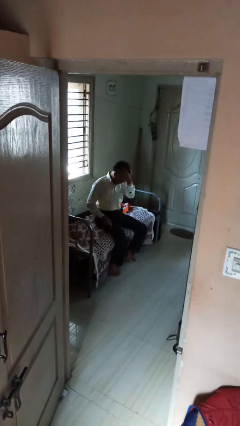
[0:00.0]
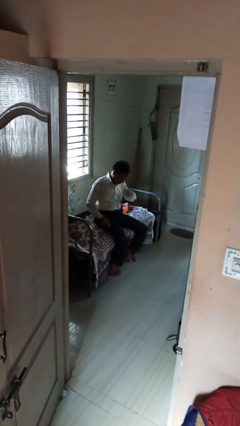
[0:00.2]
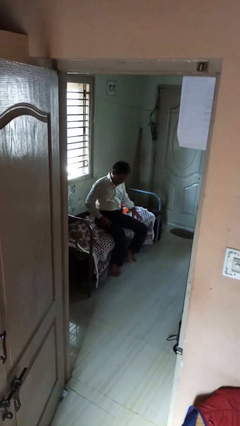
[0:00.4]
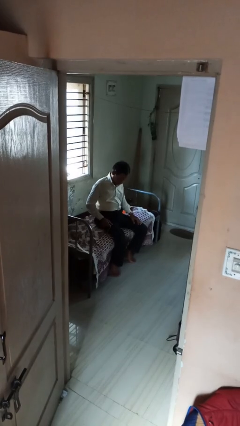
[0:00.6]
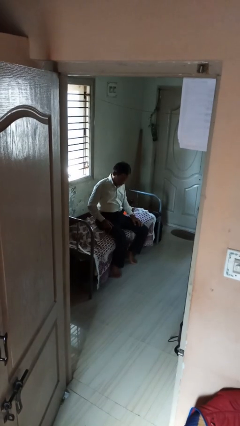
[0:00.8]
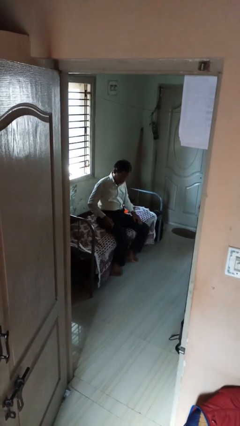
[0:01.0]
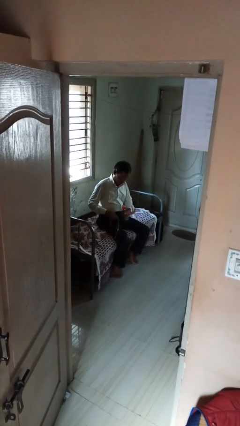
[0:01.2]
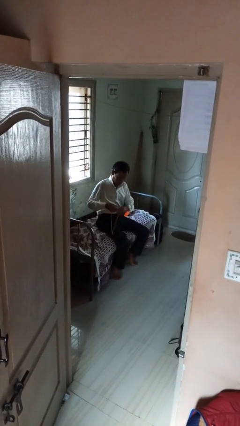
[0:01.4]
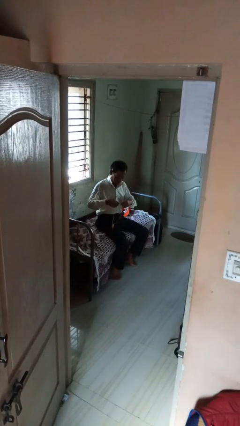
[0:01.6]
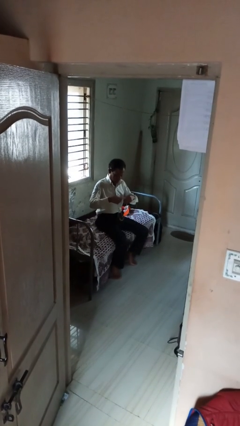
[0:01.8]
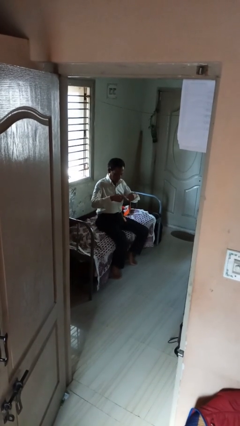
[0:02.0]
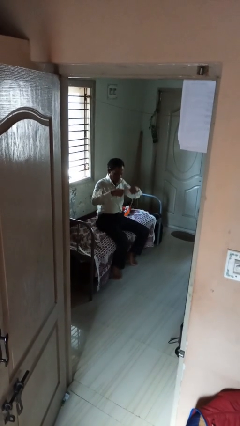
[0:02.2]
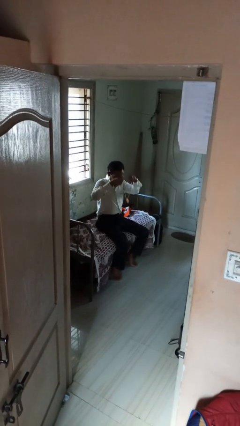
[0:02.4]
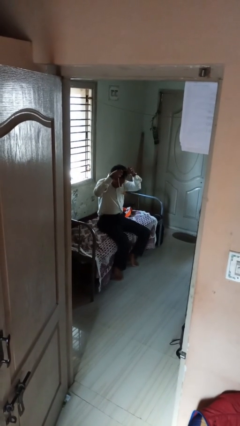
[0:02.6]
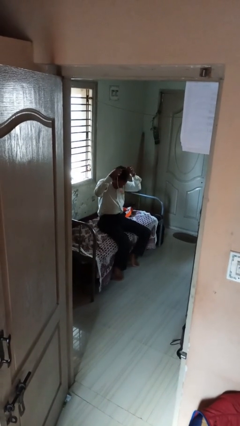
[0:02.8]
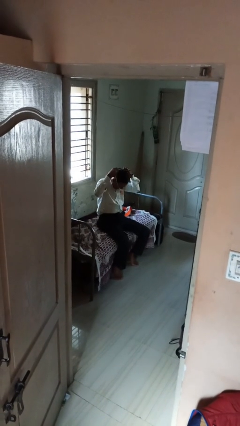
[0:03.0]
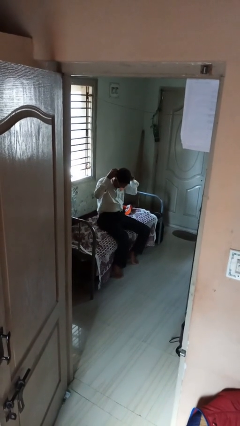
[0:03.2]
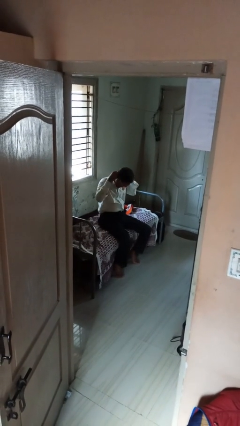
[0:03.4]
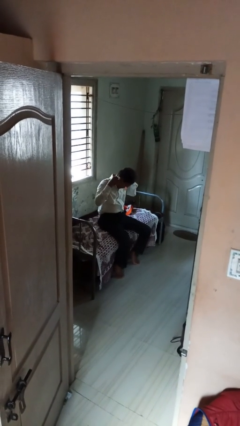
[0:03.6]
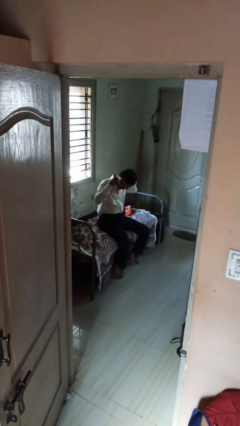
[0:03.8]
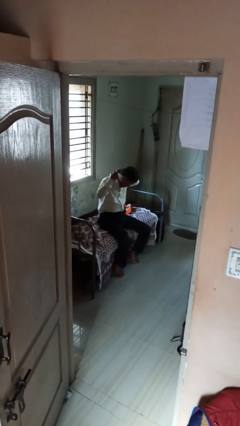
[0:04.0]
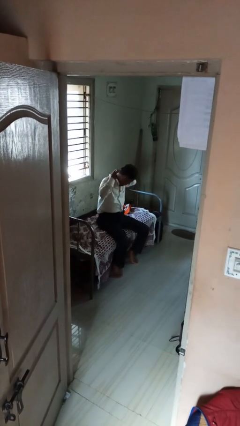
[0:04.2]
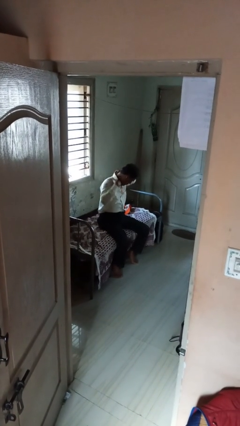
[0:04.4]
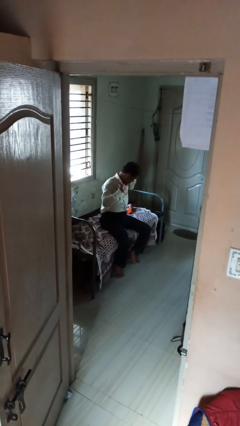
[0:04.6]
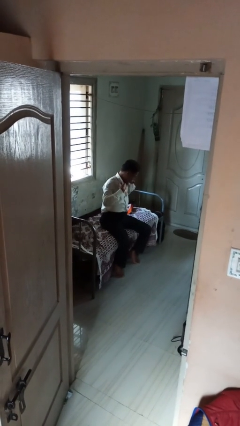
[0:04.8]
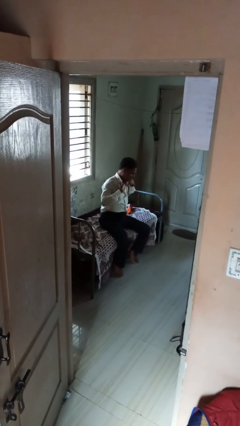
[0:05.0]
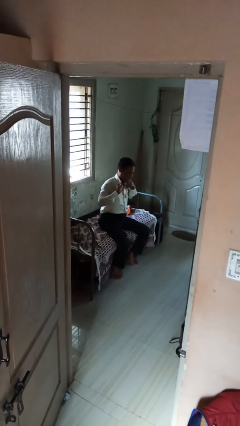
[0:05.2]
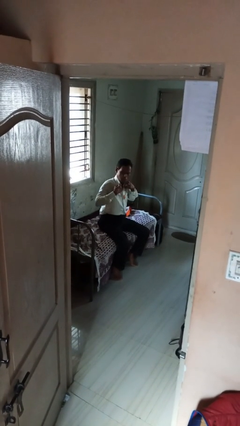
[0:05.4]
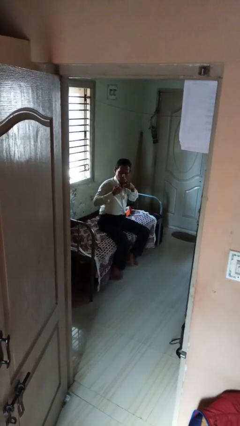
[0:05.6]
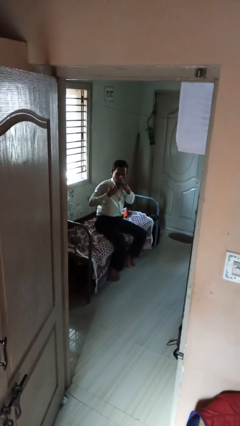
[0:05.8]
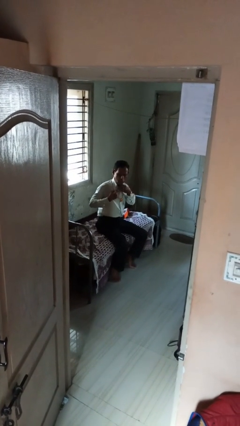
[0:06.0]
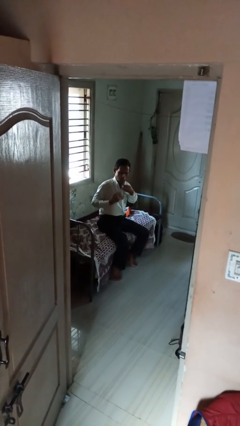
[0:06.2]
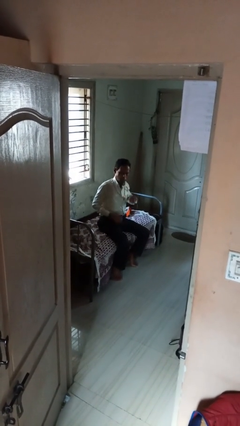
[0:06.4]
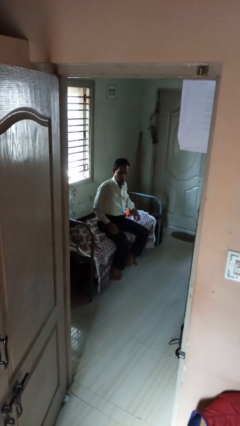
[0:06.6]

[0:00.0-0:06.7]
person puts on necklace

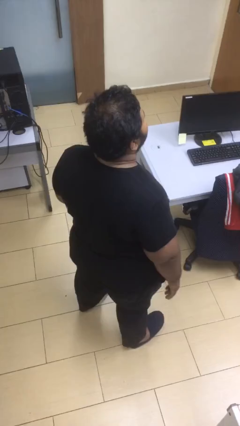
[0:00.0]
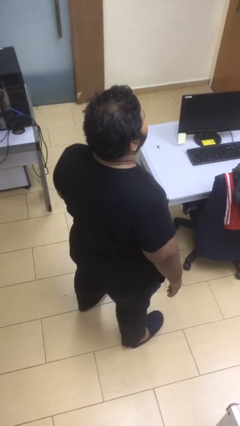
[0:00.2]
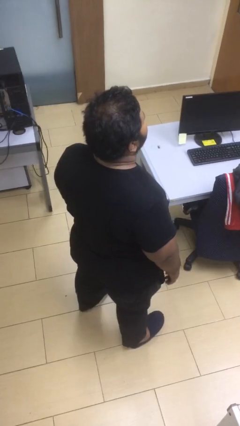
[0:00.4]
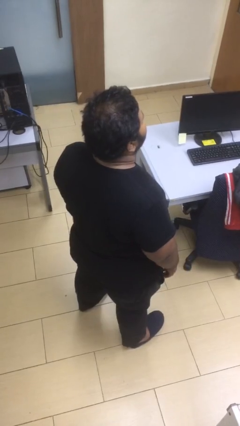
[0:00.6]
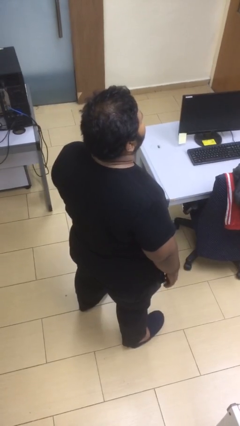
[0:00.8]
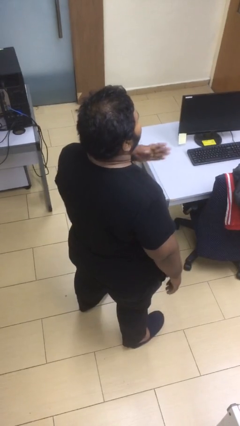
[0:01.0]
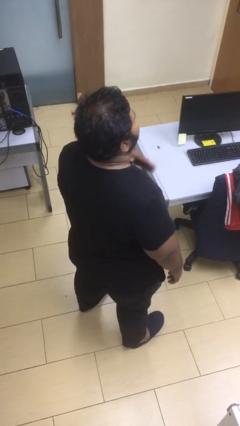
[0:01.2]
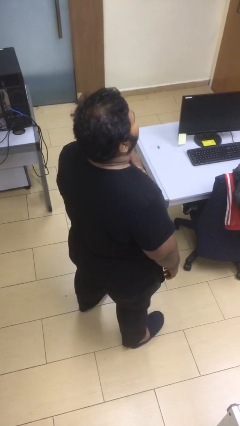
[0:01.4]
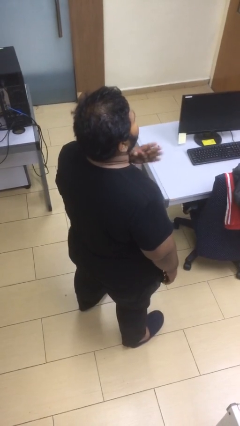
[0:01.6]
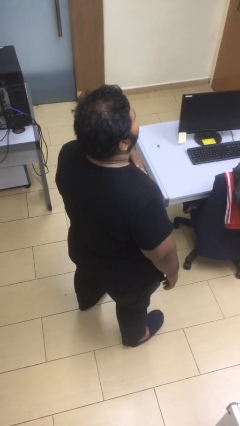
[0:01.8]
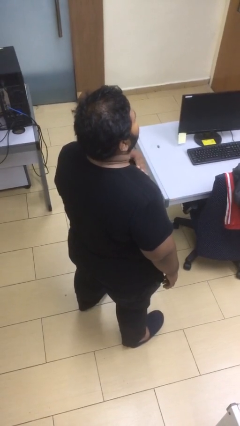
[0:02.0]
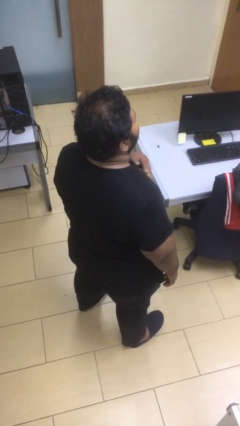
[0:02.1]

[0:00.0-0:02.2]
person drums on chest

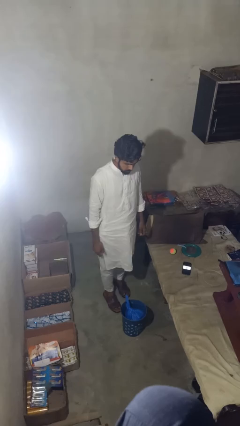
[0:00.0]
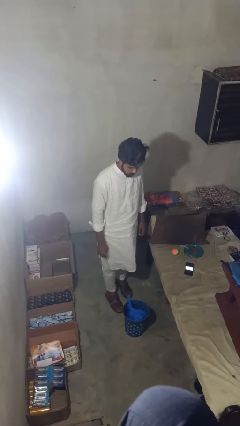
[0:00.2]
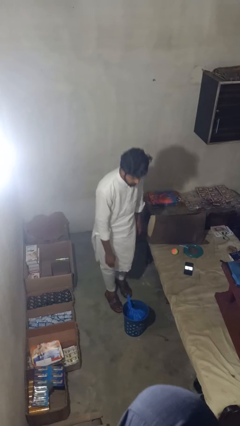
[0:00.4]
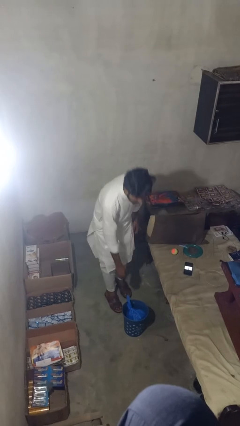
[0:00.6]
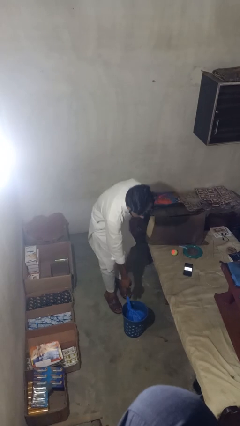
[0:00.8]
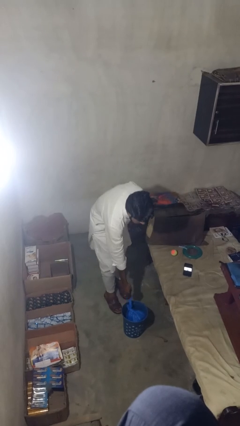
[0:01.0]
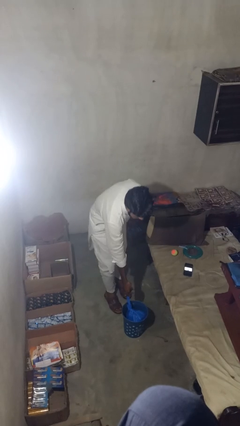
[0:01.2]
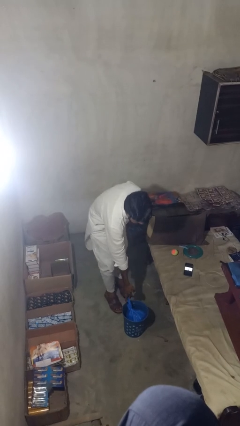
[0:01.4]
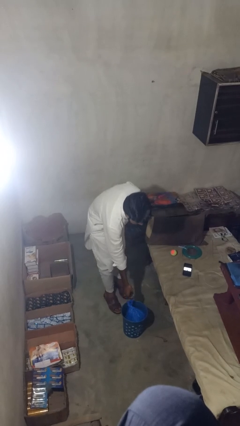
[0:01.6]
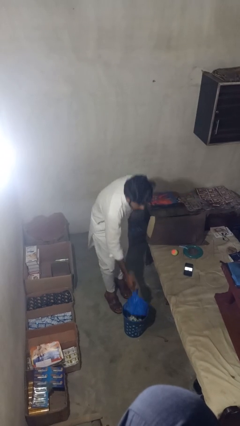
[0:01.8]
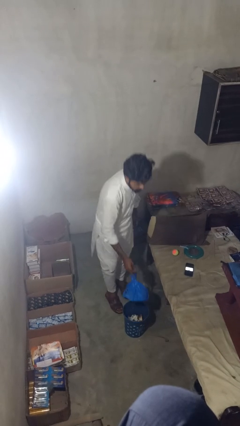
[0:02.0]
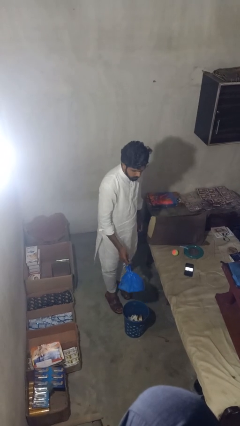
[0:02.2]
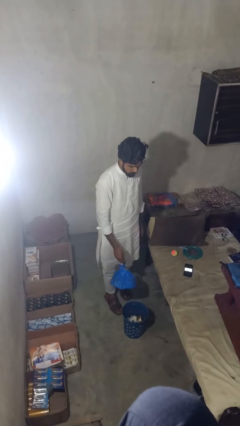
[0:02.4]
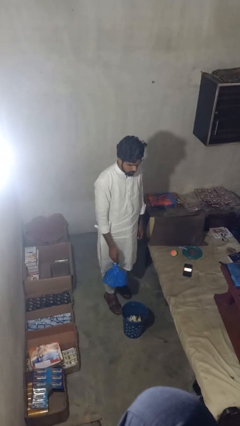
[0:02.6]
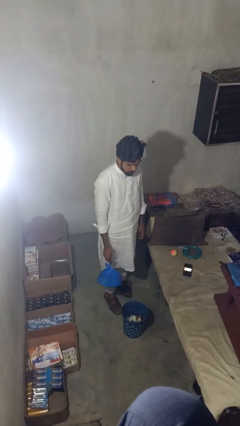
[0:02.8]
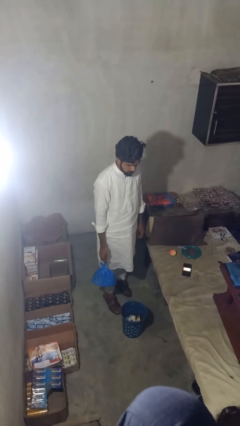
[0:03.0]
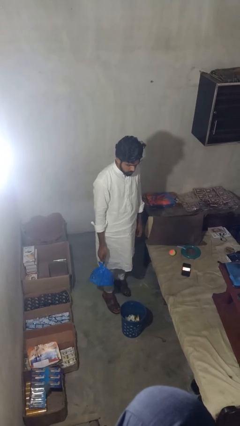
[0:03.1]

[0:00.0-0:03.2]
person takes object from basket

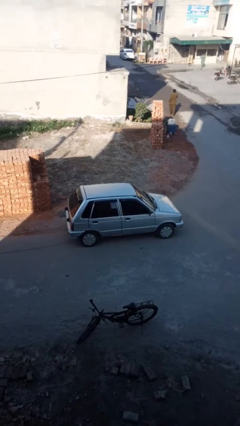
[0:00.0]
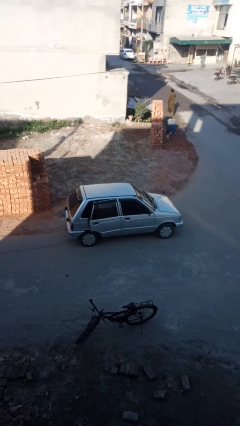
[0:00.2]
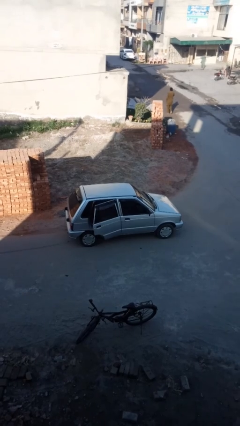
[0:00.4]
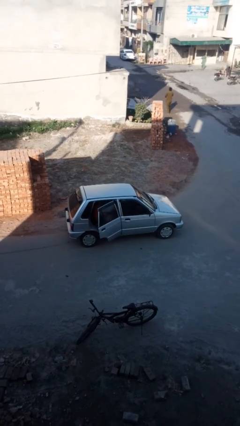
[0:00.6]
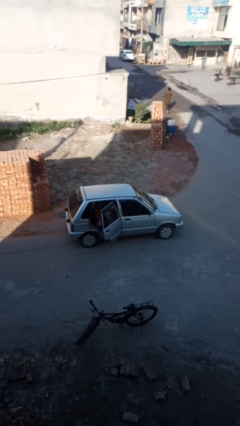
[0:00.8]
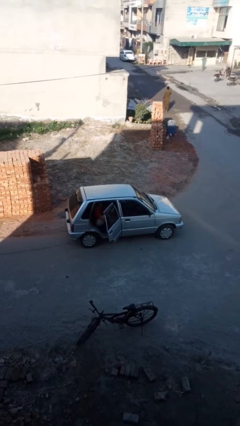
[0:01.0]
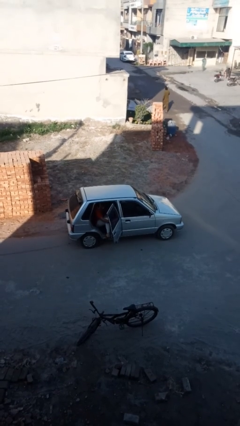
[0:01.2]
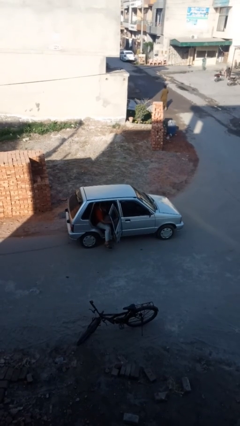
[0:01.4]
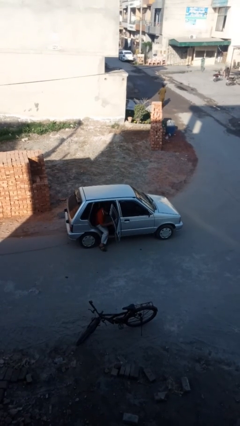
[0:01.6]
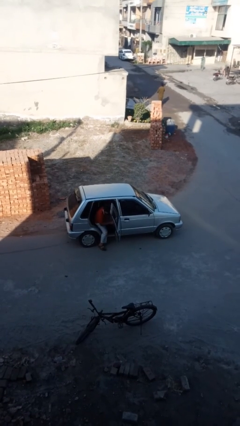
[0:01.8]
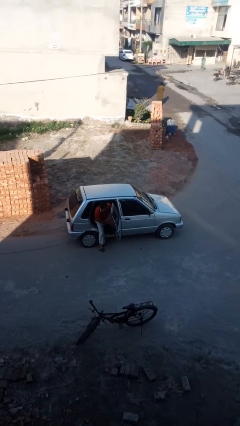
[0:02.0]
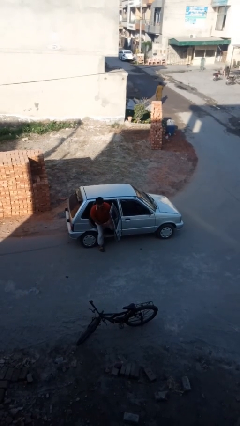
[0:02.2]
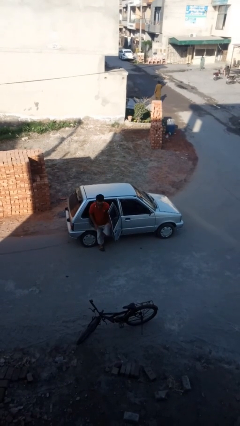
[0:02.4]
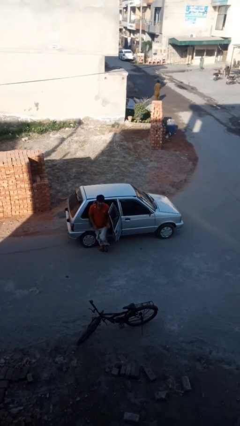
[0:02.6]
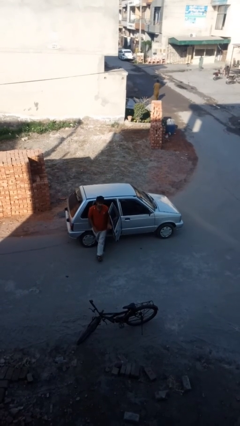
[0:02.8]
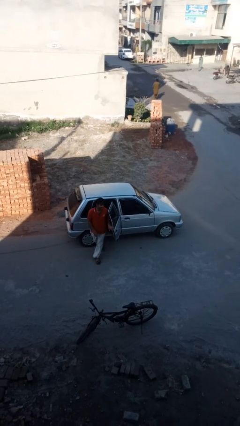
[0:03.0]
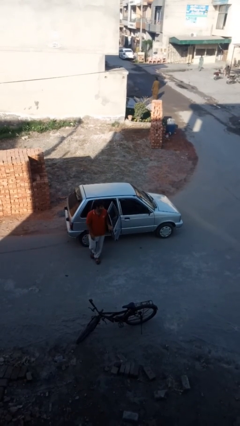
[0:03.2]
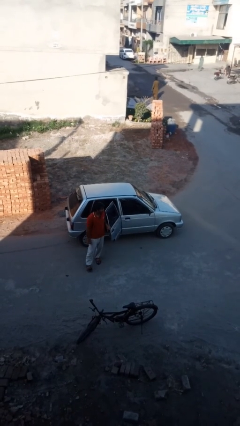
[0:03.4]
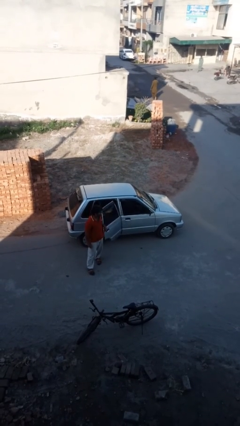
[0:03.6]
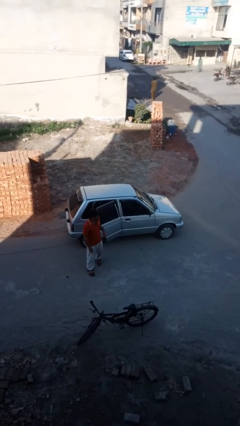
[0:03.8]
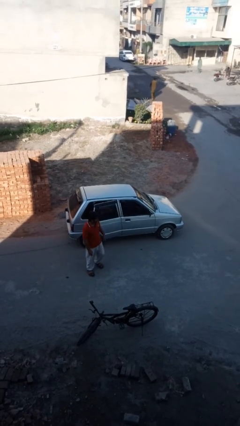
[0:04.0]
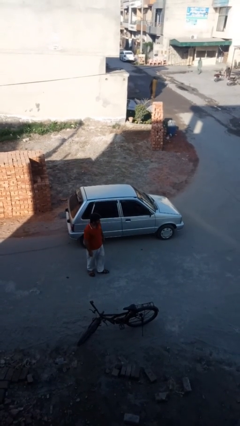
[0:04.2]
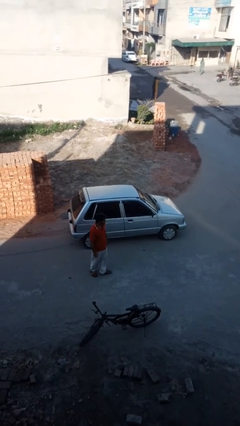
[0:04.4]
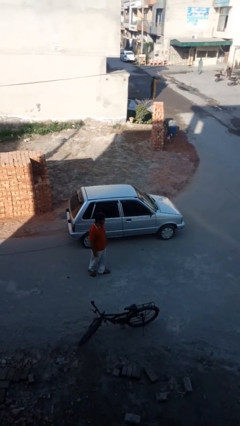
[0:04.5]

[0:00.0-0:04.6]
car drops off person

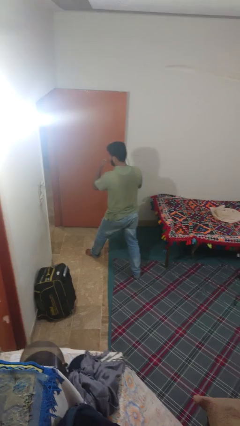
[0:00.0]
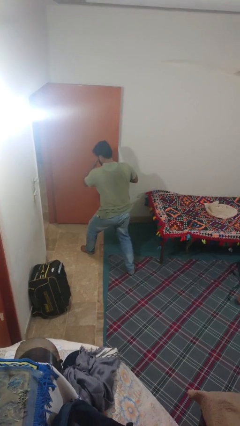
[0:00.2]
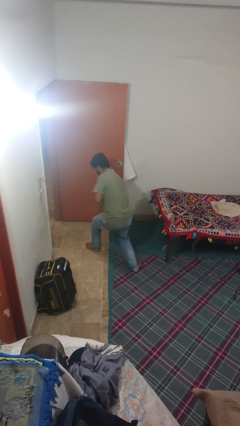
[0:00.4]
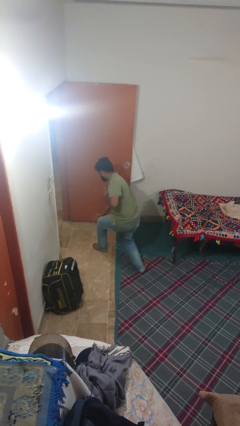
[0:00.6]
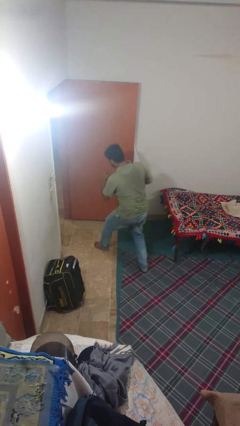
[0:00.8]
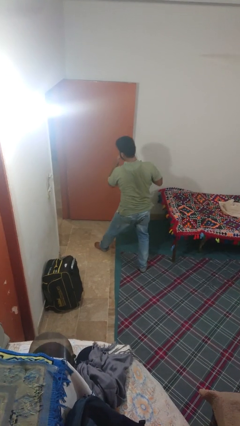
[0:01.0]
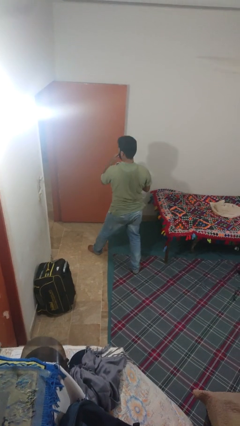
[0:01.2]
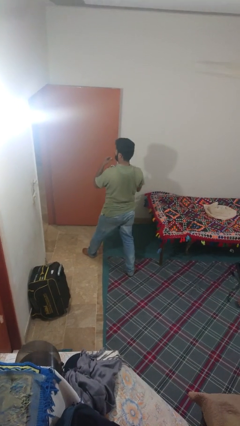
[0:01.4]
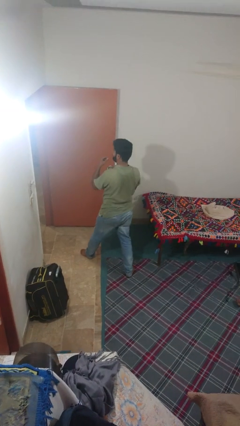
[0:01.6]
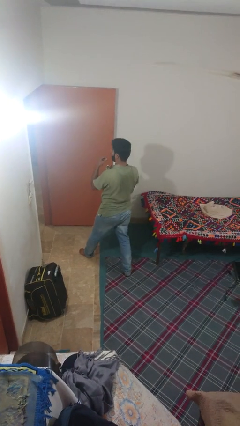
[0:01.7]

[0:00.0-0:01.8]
person karate chop
